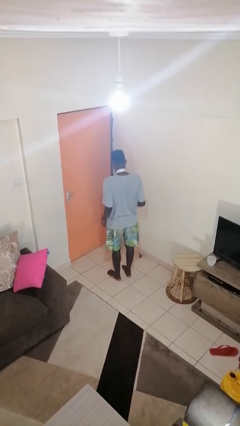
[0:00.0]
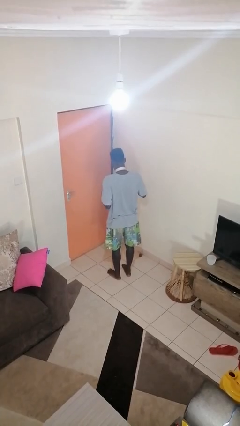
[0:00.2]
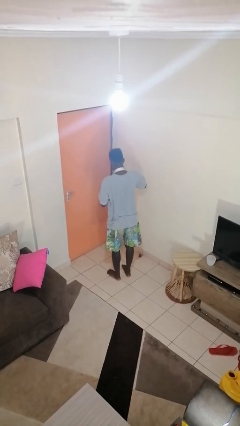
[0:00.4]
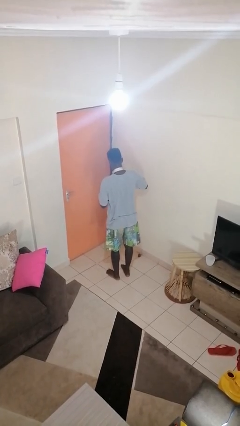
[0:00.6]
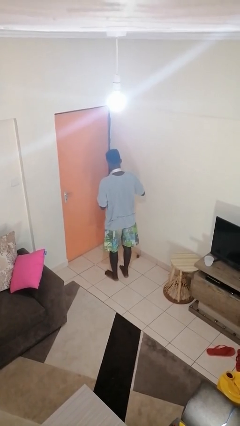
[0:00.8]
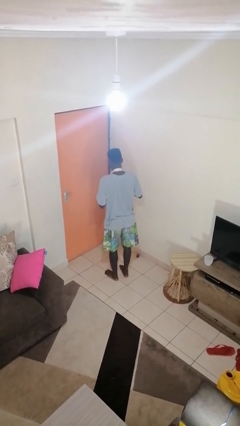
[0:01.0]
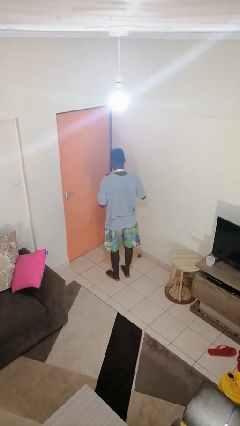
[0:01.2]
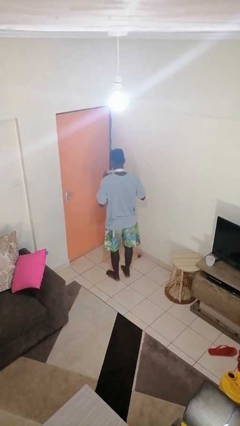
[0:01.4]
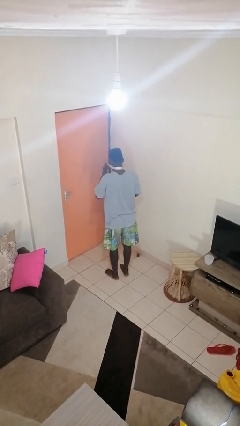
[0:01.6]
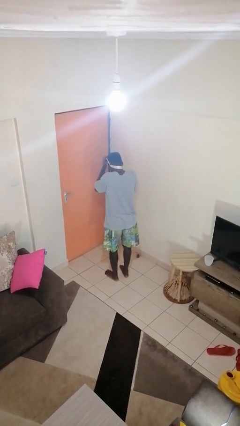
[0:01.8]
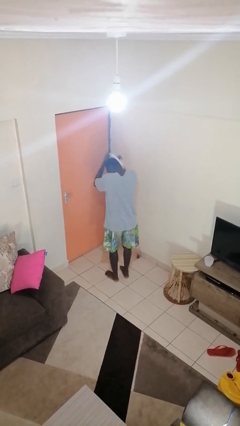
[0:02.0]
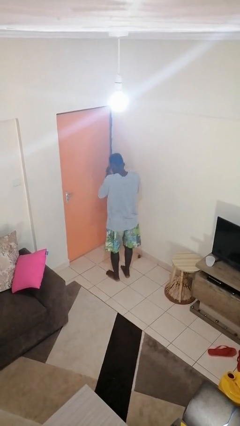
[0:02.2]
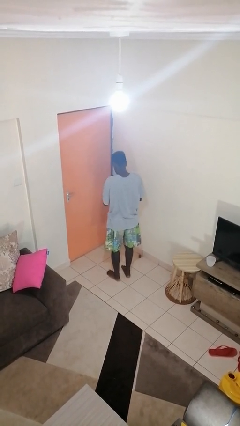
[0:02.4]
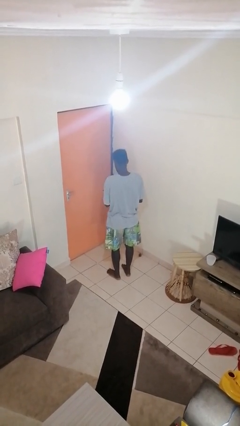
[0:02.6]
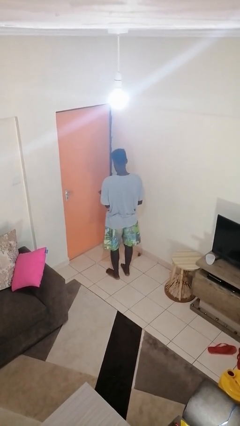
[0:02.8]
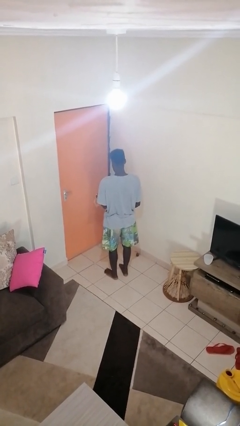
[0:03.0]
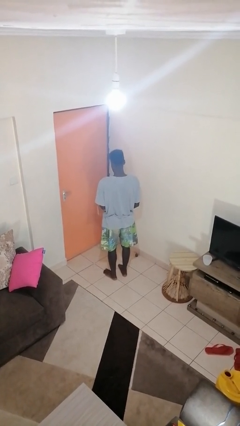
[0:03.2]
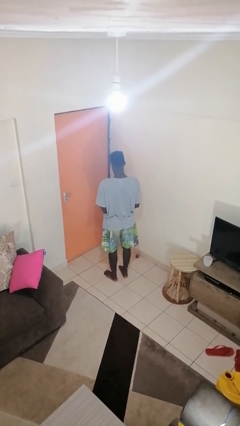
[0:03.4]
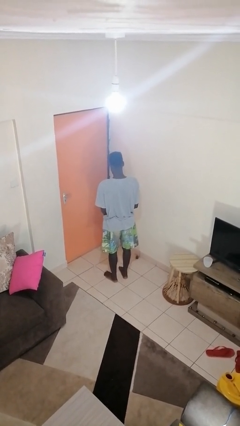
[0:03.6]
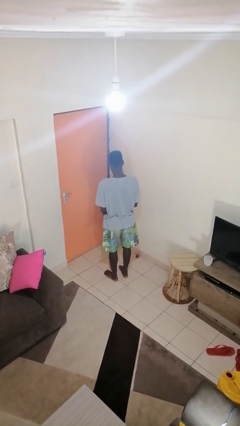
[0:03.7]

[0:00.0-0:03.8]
person takes off necktie

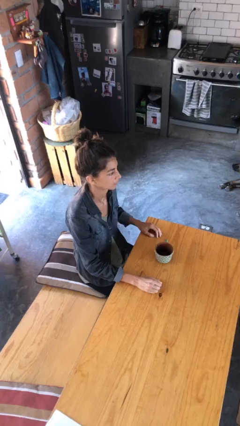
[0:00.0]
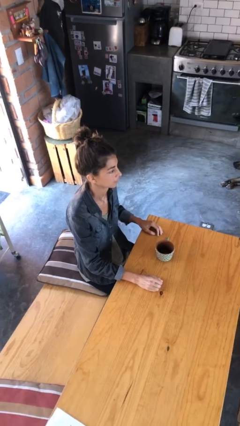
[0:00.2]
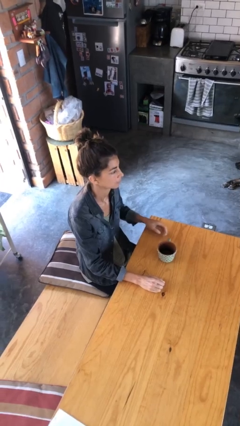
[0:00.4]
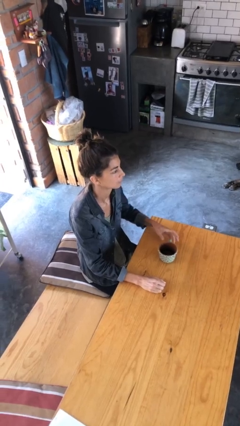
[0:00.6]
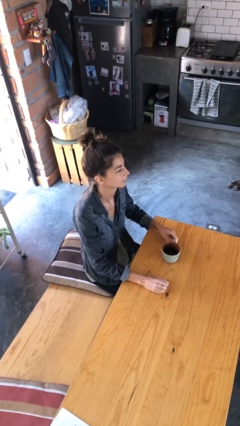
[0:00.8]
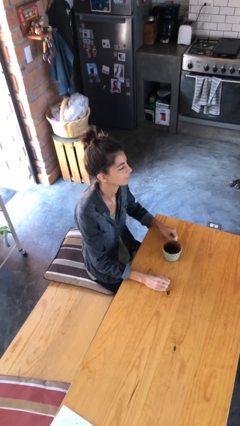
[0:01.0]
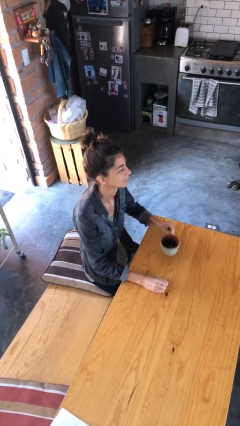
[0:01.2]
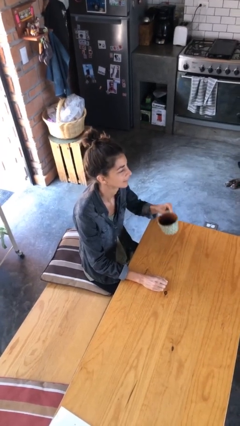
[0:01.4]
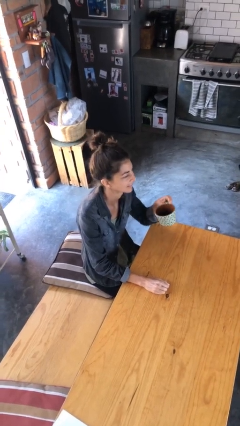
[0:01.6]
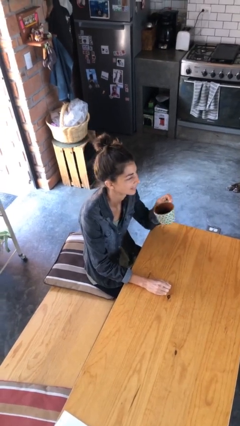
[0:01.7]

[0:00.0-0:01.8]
person picks up object from table

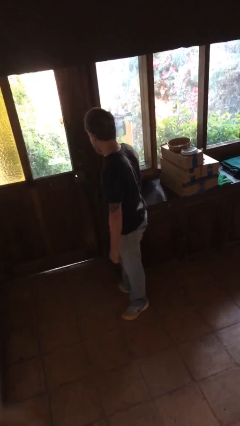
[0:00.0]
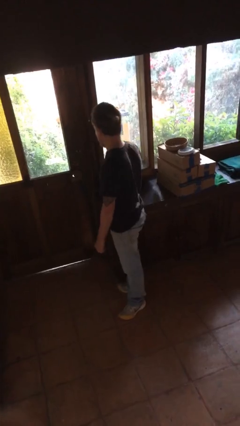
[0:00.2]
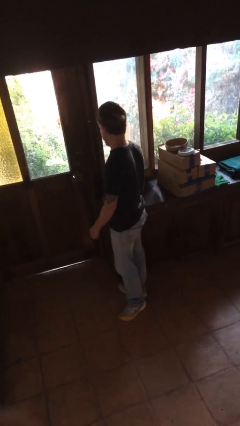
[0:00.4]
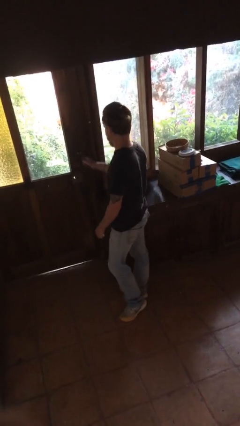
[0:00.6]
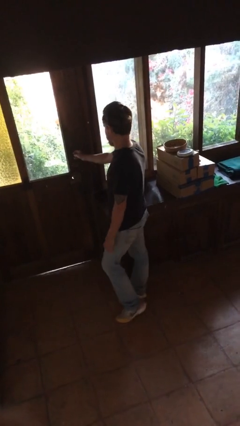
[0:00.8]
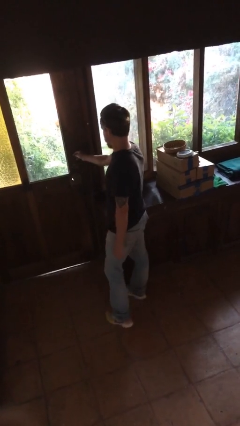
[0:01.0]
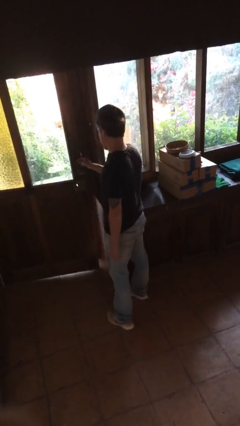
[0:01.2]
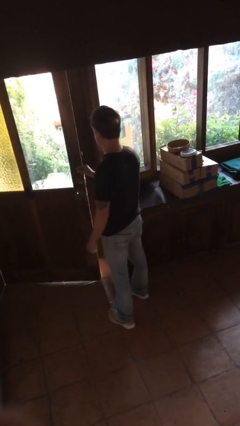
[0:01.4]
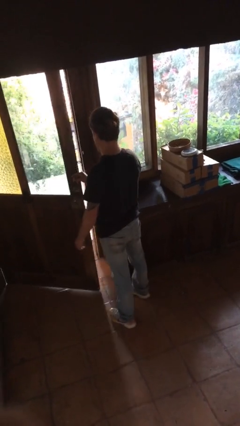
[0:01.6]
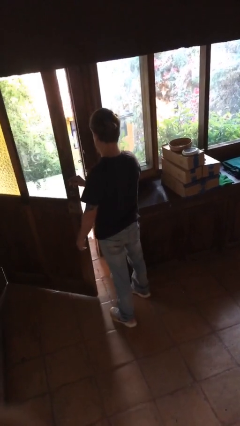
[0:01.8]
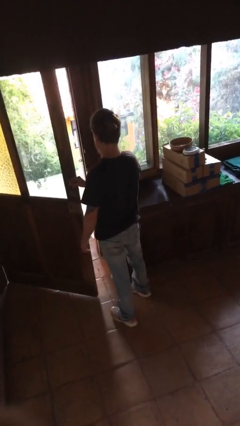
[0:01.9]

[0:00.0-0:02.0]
person opens facility door

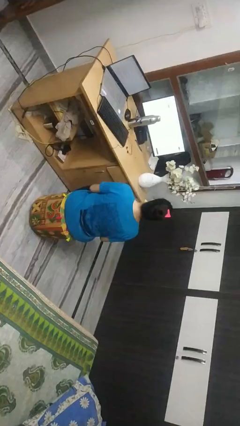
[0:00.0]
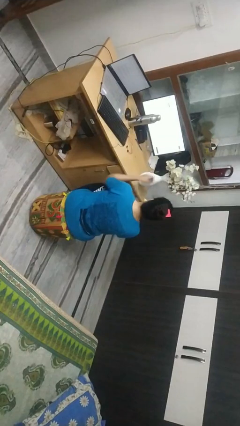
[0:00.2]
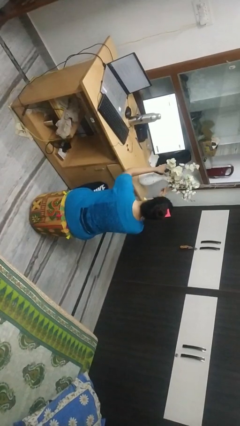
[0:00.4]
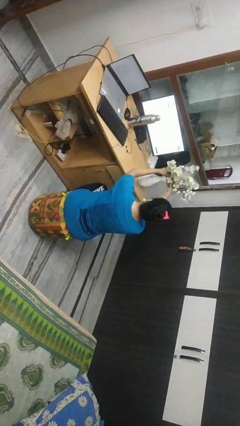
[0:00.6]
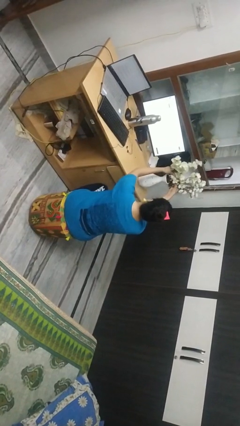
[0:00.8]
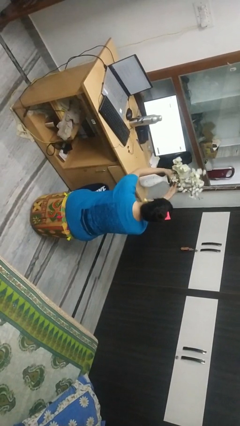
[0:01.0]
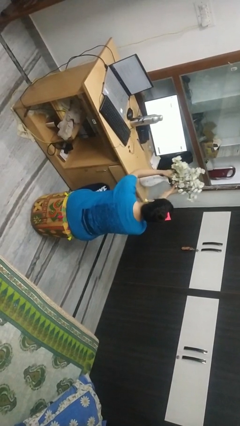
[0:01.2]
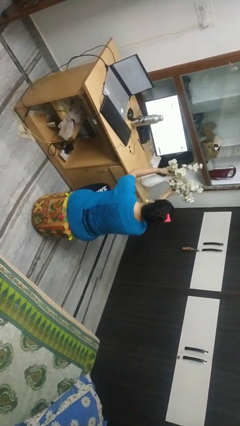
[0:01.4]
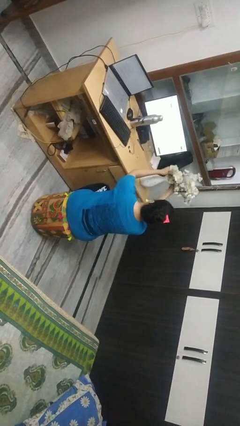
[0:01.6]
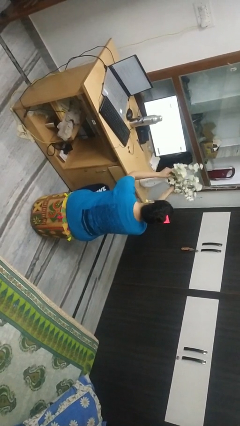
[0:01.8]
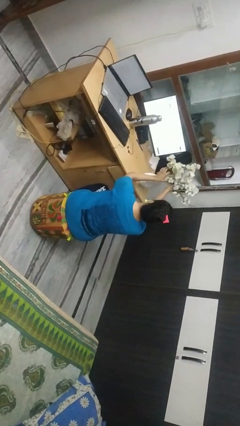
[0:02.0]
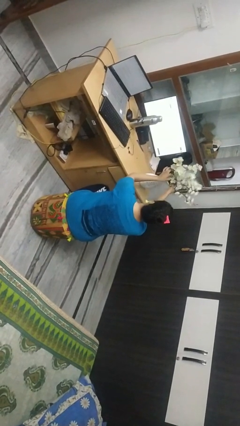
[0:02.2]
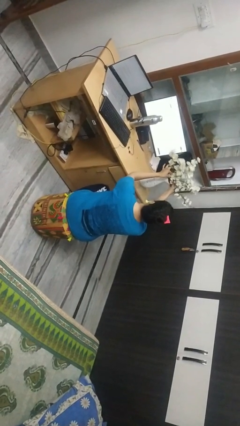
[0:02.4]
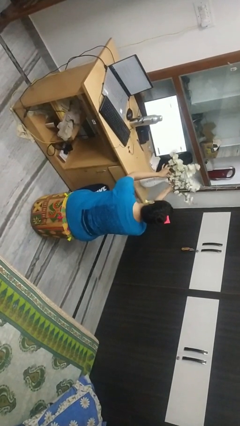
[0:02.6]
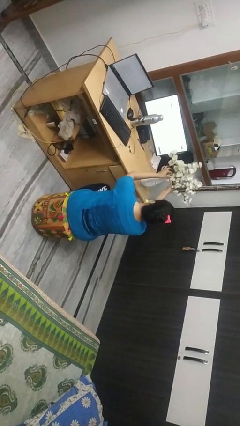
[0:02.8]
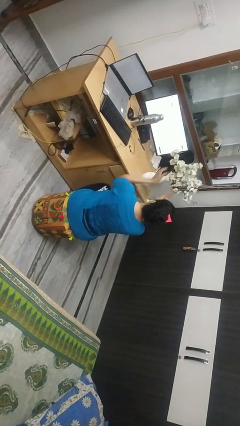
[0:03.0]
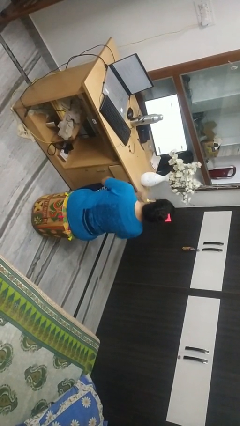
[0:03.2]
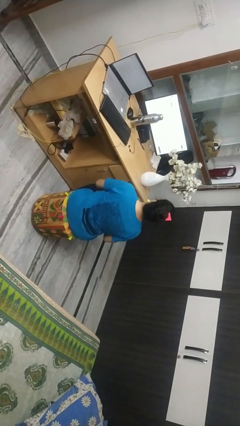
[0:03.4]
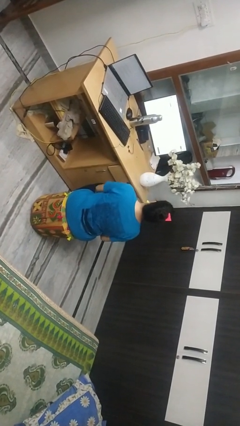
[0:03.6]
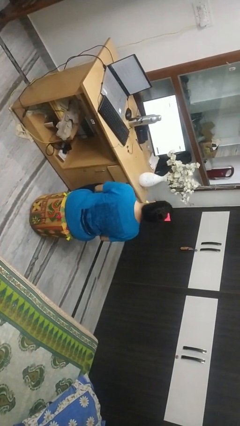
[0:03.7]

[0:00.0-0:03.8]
person arranges flowers in vase

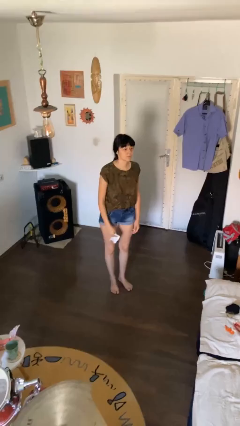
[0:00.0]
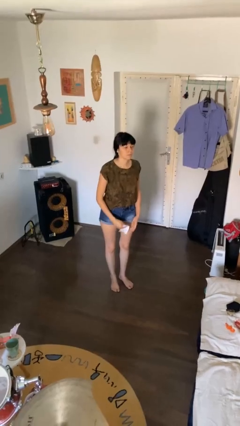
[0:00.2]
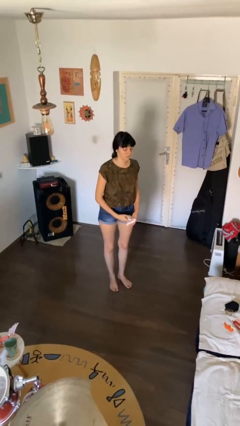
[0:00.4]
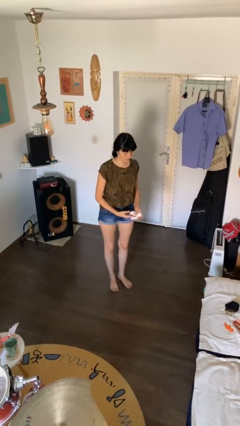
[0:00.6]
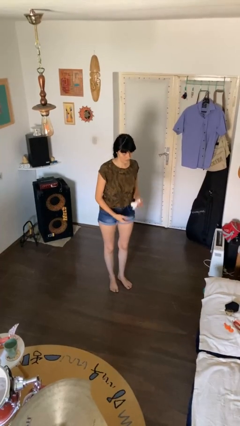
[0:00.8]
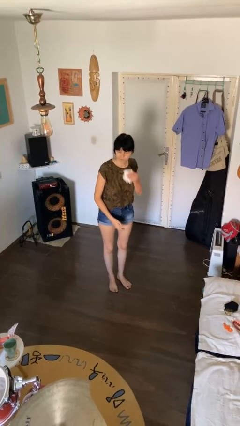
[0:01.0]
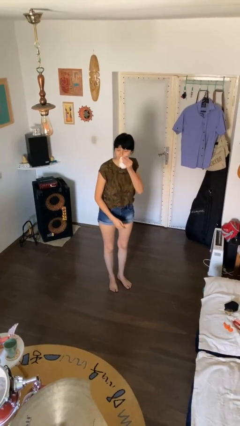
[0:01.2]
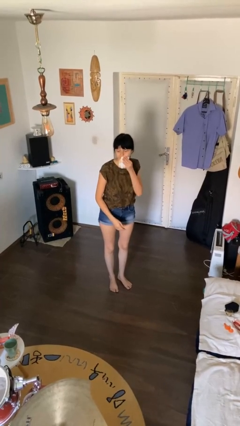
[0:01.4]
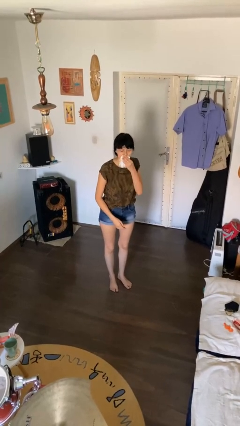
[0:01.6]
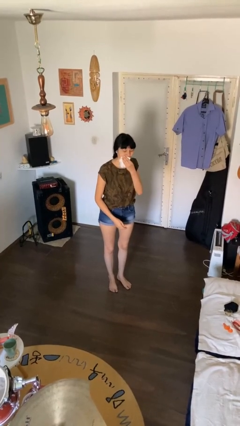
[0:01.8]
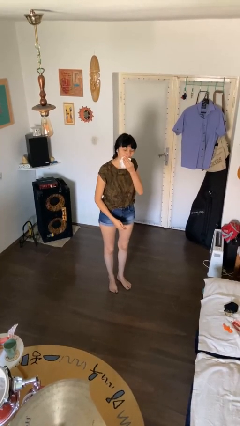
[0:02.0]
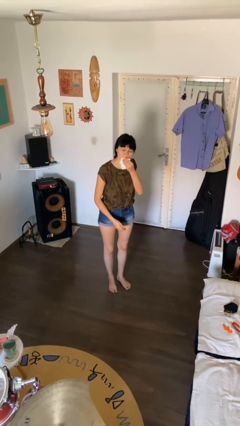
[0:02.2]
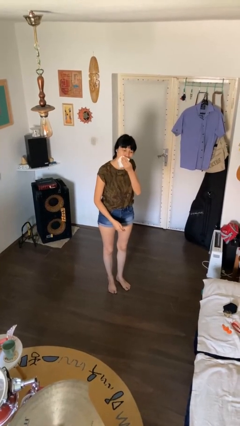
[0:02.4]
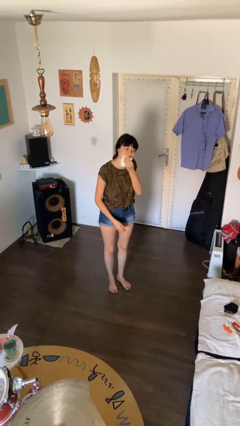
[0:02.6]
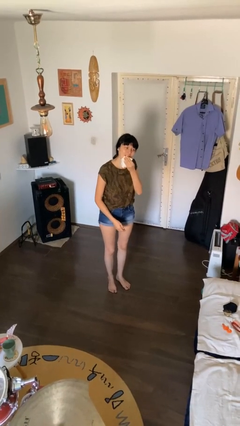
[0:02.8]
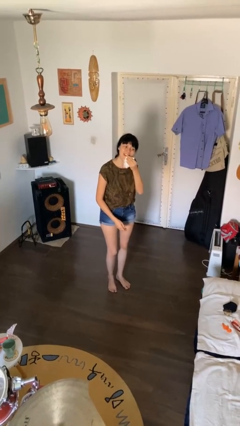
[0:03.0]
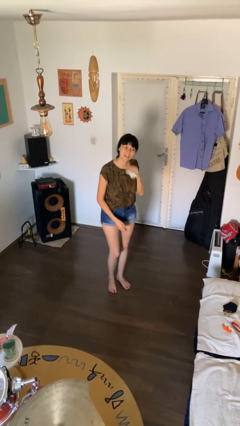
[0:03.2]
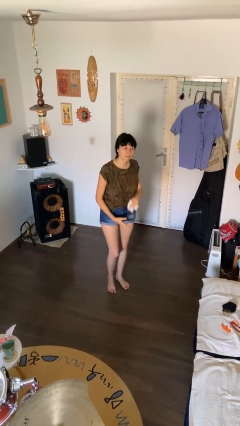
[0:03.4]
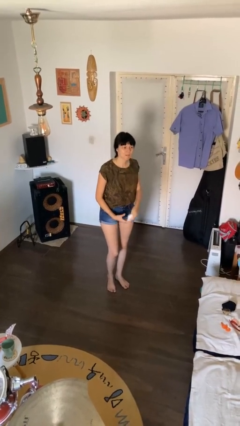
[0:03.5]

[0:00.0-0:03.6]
person wipes mouth with napkin

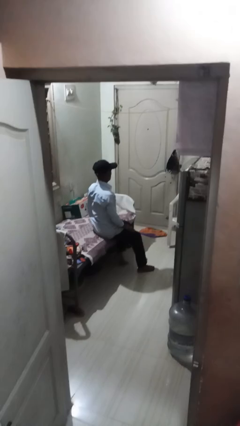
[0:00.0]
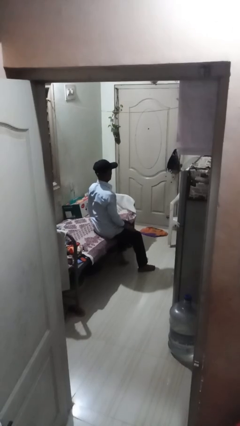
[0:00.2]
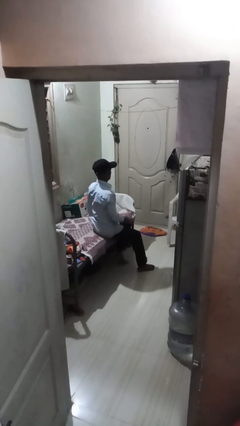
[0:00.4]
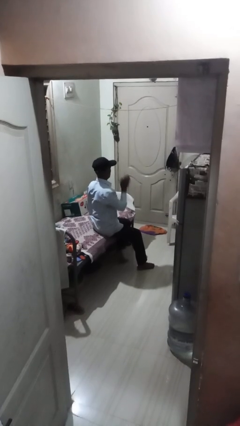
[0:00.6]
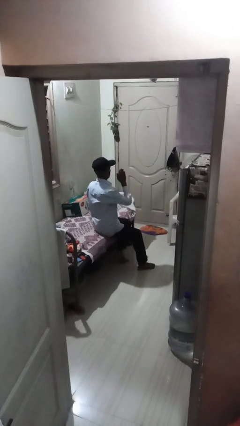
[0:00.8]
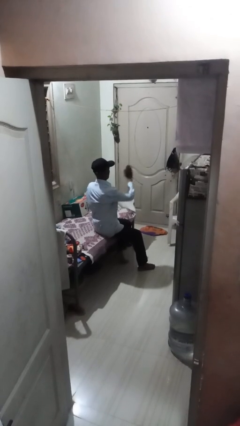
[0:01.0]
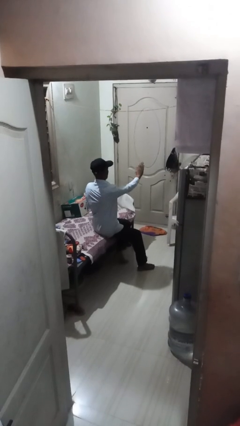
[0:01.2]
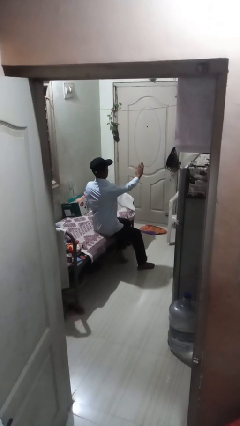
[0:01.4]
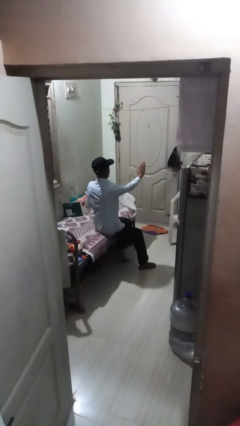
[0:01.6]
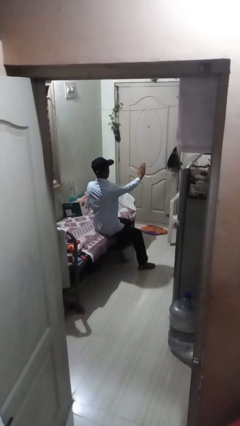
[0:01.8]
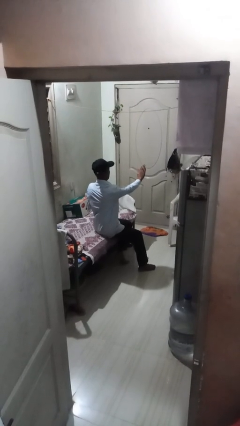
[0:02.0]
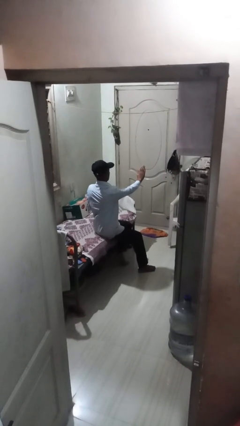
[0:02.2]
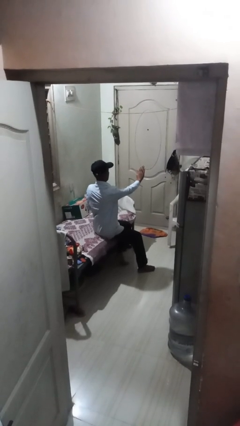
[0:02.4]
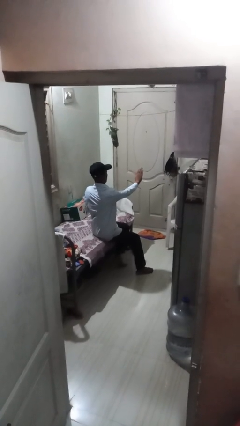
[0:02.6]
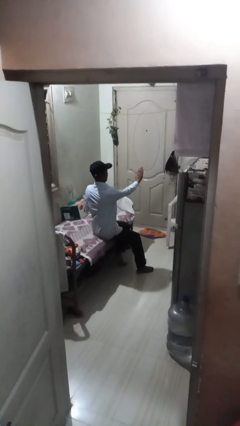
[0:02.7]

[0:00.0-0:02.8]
person gestures stop
